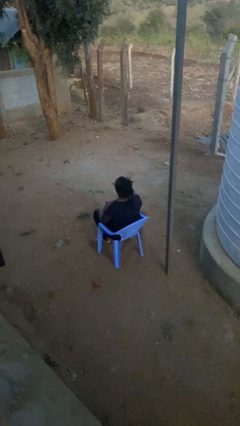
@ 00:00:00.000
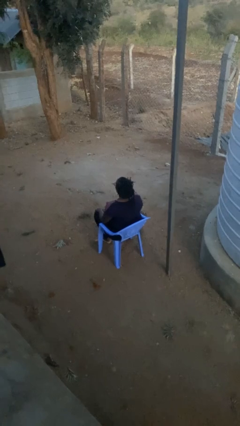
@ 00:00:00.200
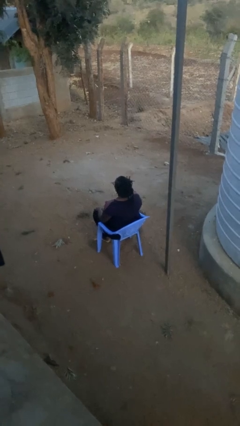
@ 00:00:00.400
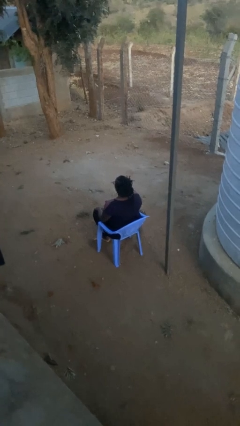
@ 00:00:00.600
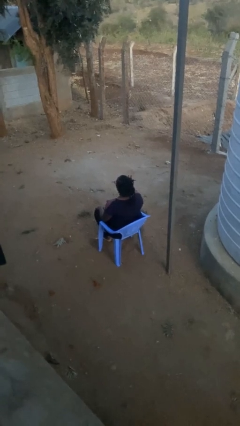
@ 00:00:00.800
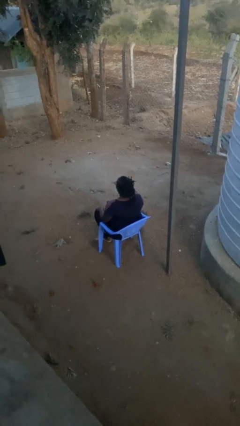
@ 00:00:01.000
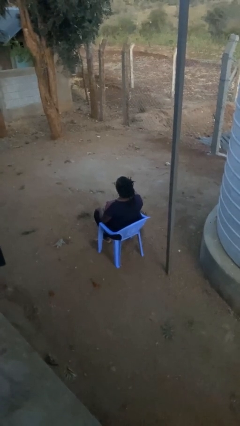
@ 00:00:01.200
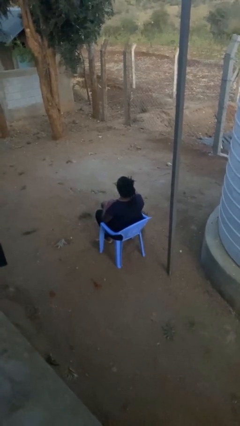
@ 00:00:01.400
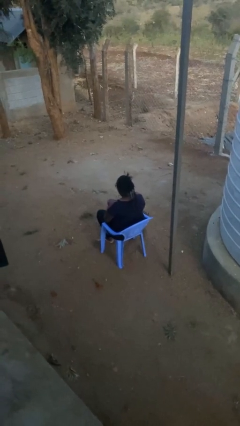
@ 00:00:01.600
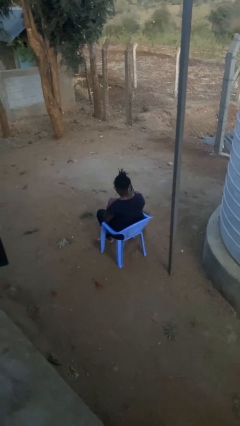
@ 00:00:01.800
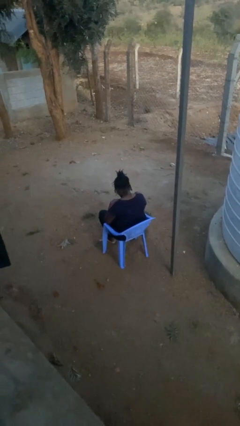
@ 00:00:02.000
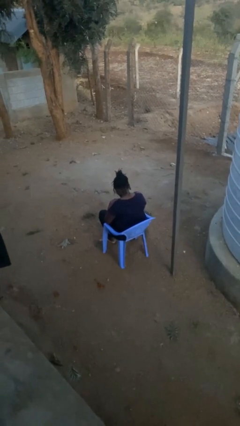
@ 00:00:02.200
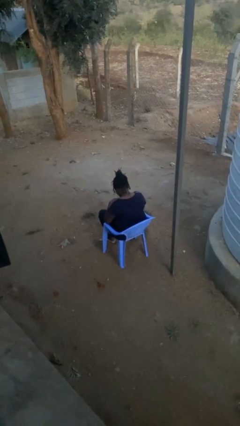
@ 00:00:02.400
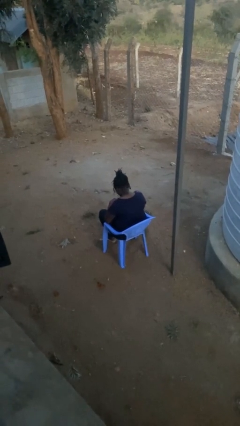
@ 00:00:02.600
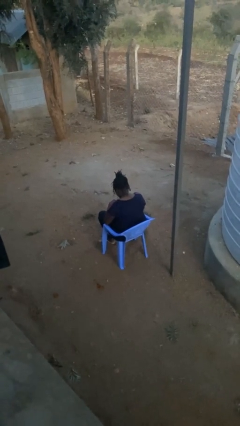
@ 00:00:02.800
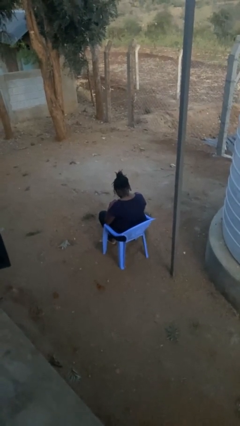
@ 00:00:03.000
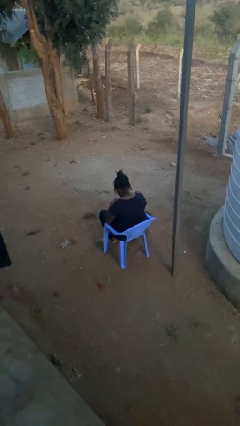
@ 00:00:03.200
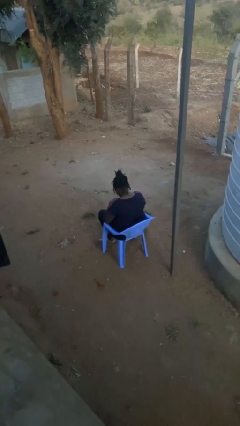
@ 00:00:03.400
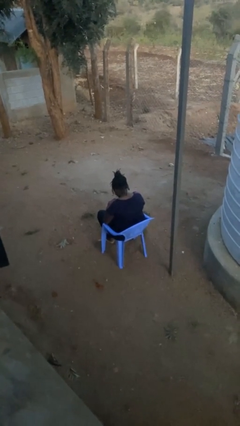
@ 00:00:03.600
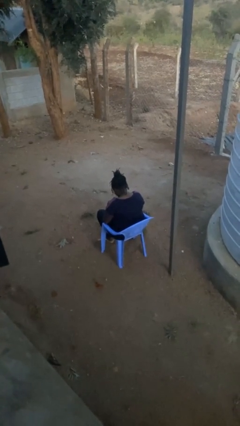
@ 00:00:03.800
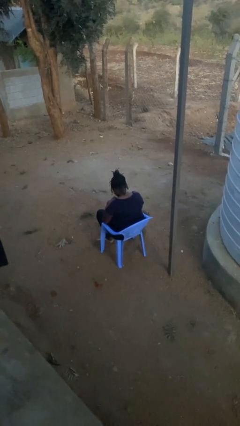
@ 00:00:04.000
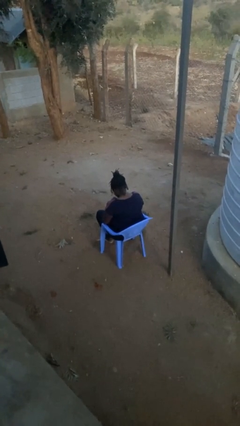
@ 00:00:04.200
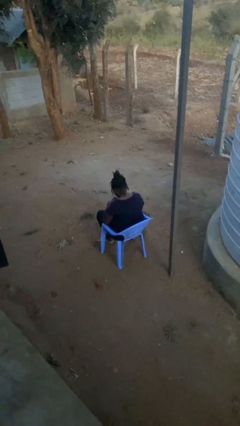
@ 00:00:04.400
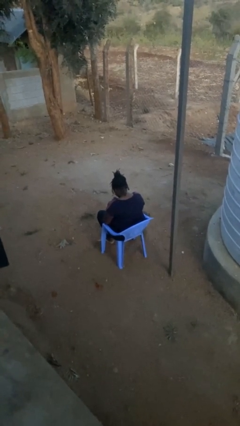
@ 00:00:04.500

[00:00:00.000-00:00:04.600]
person prays

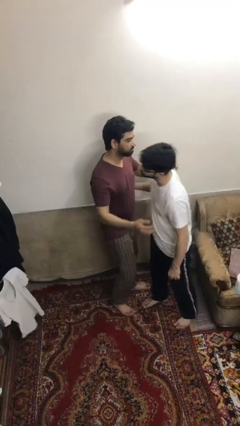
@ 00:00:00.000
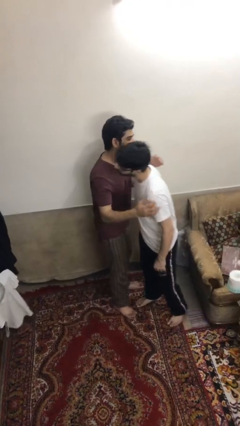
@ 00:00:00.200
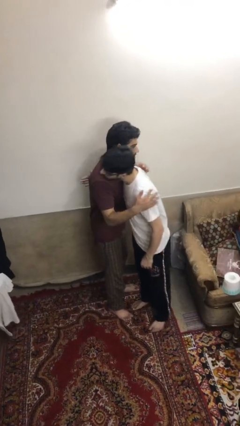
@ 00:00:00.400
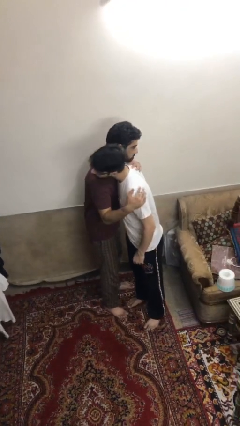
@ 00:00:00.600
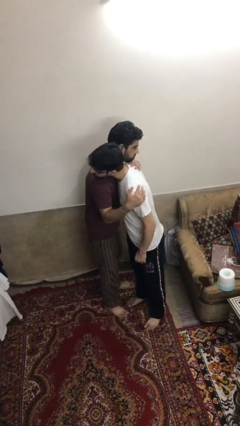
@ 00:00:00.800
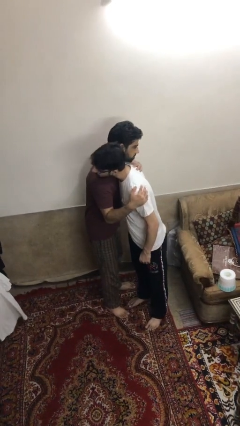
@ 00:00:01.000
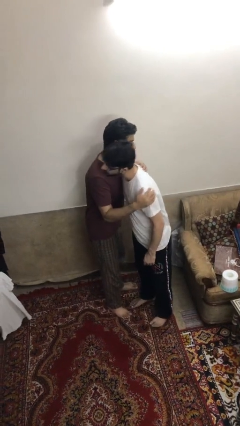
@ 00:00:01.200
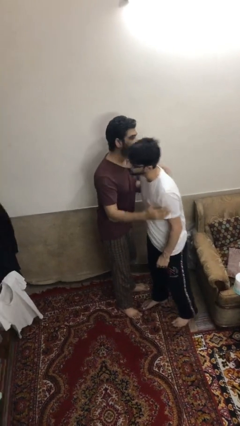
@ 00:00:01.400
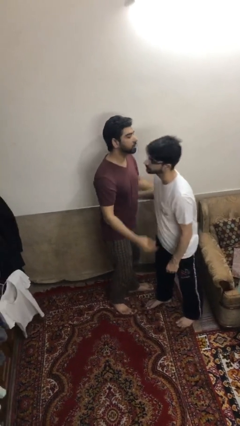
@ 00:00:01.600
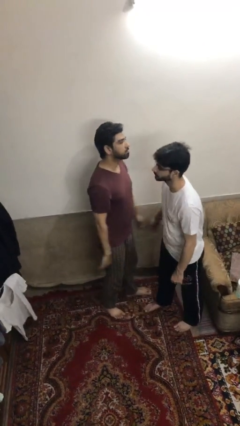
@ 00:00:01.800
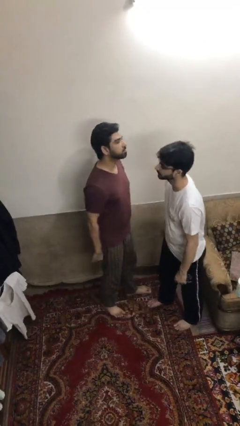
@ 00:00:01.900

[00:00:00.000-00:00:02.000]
person embraces person

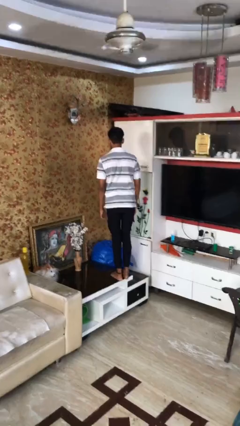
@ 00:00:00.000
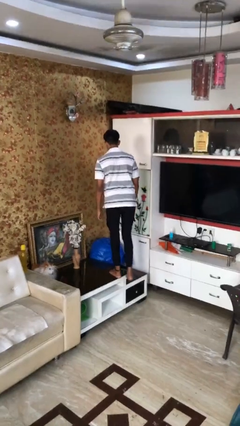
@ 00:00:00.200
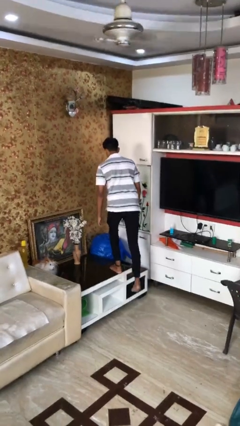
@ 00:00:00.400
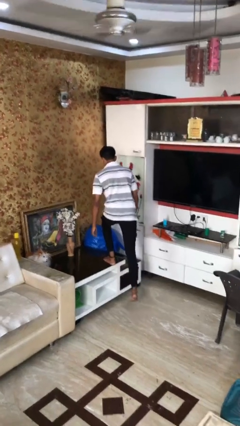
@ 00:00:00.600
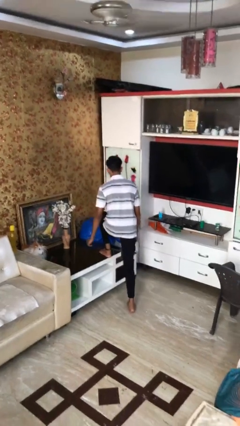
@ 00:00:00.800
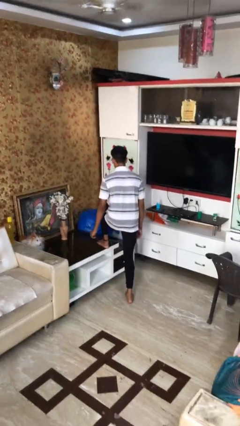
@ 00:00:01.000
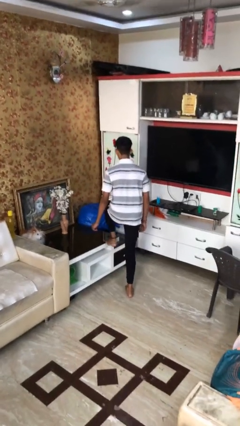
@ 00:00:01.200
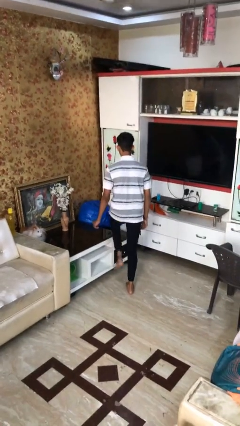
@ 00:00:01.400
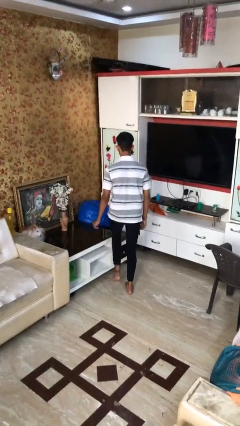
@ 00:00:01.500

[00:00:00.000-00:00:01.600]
person climbs off table

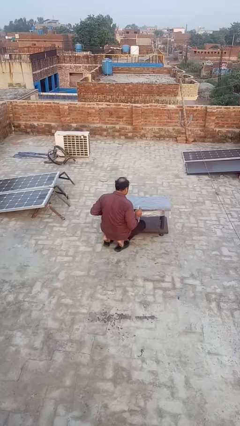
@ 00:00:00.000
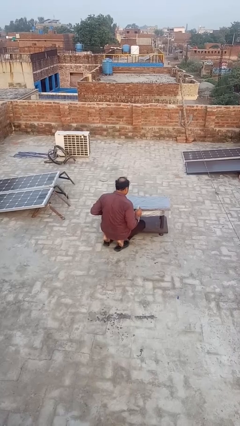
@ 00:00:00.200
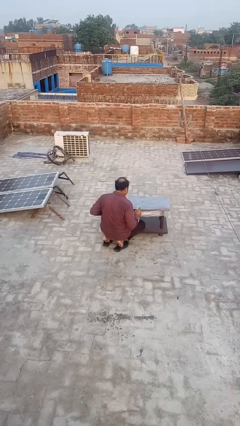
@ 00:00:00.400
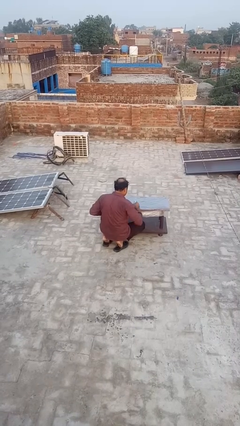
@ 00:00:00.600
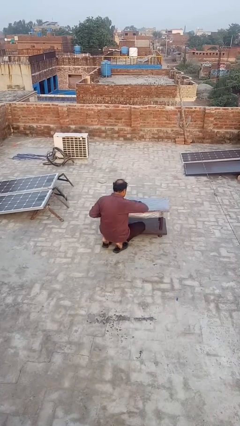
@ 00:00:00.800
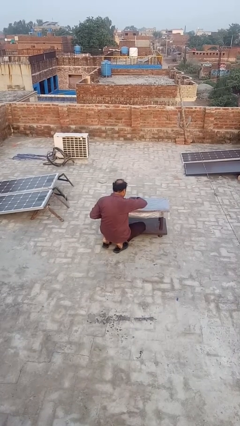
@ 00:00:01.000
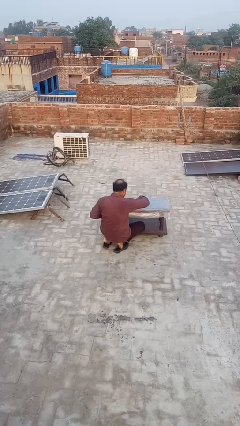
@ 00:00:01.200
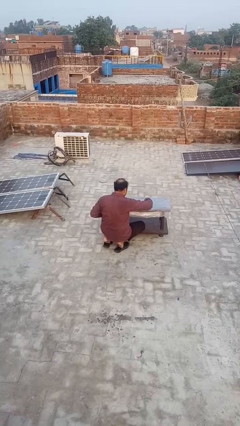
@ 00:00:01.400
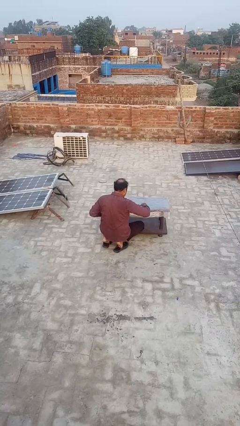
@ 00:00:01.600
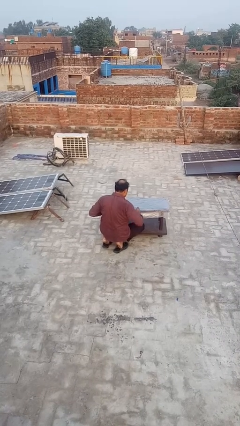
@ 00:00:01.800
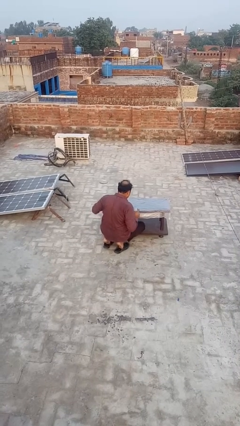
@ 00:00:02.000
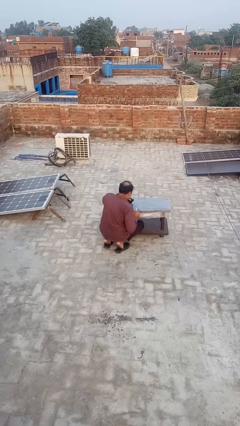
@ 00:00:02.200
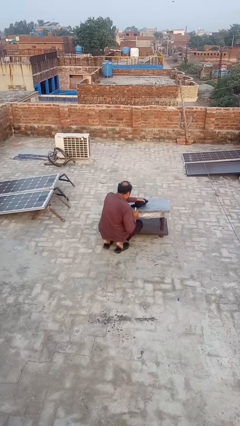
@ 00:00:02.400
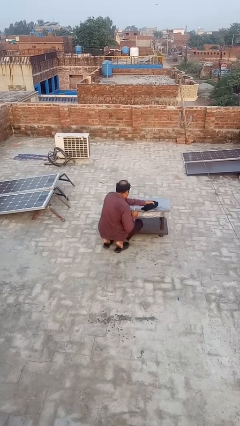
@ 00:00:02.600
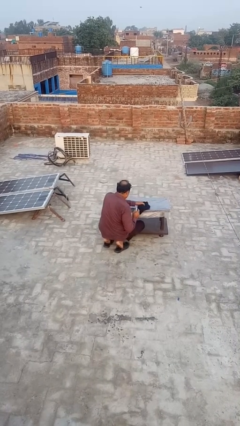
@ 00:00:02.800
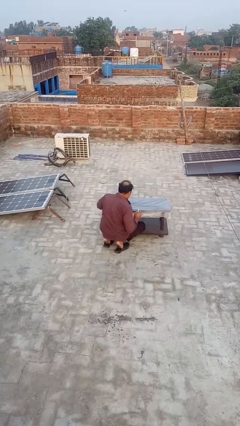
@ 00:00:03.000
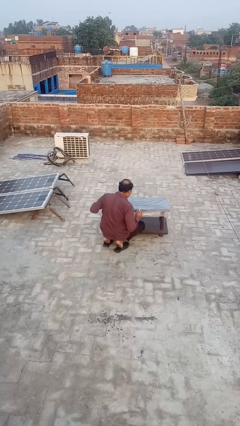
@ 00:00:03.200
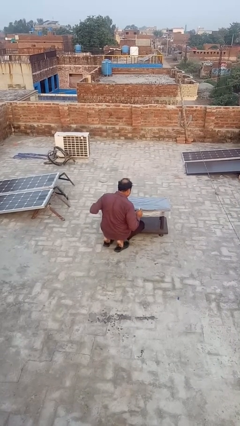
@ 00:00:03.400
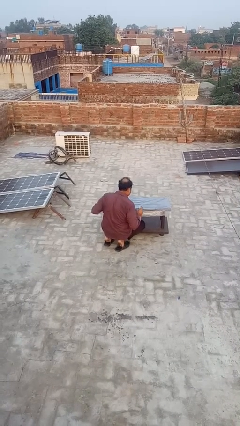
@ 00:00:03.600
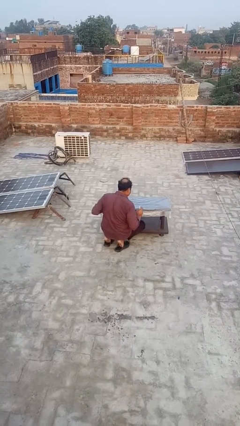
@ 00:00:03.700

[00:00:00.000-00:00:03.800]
person sprays from bottle

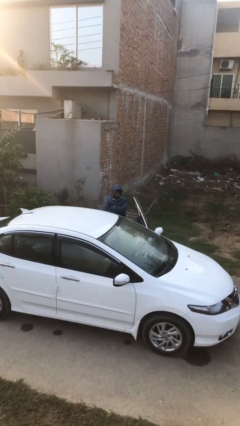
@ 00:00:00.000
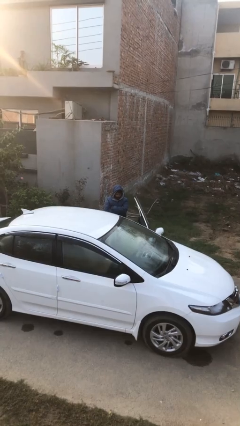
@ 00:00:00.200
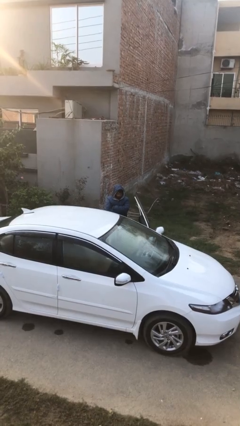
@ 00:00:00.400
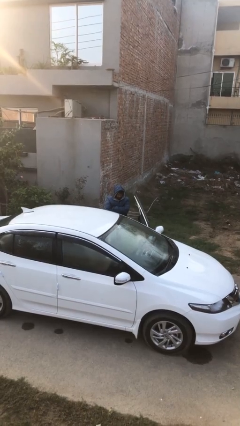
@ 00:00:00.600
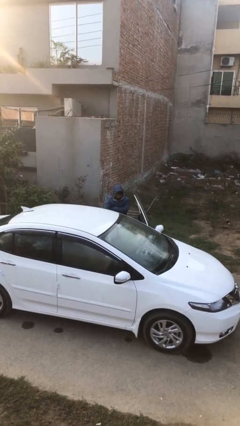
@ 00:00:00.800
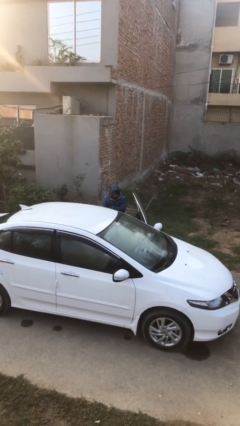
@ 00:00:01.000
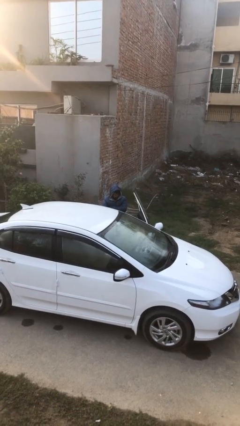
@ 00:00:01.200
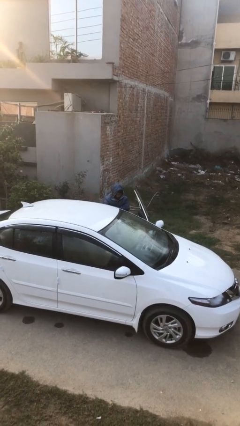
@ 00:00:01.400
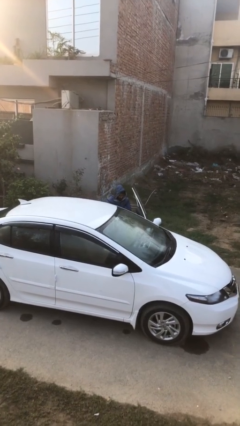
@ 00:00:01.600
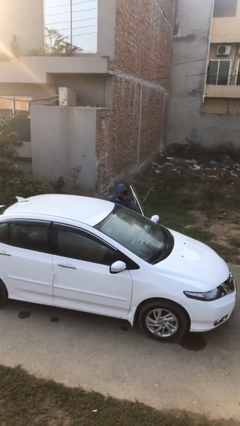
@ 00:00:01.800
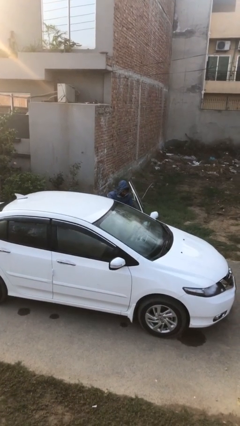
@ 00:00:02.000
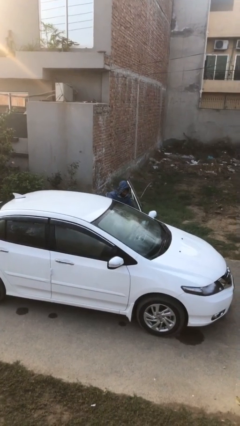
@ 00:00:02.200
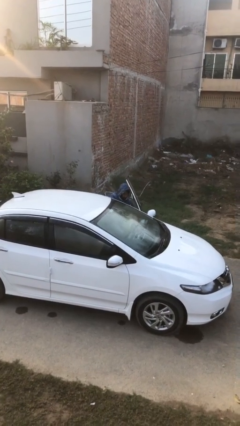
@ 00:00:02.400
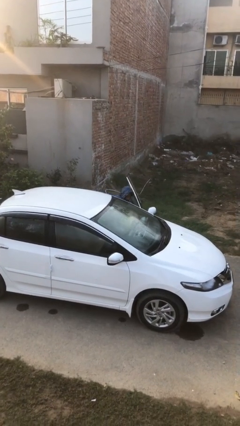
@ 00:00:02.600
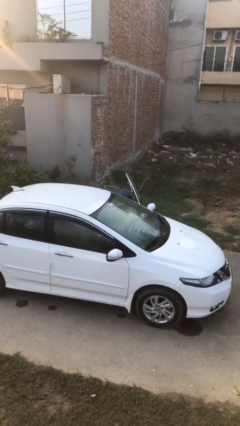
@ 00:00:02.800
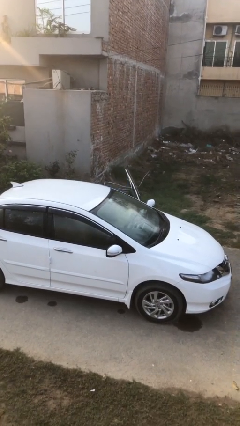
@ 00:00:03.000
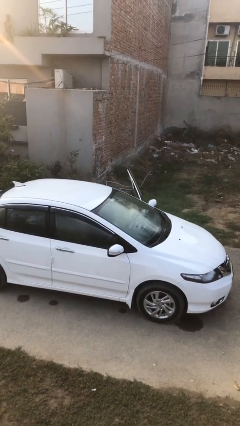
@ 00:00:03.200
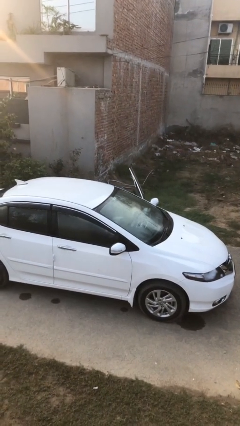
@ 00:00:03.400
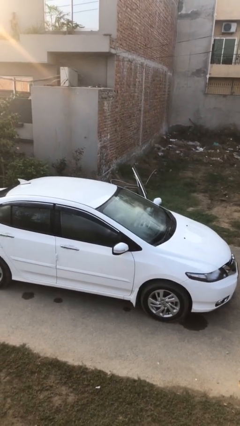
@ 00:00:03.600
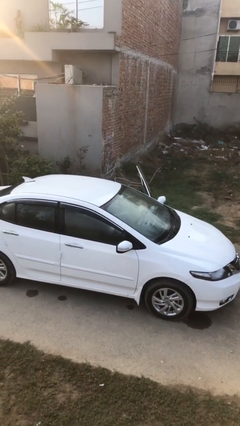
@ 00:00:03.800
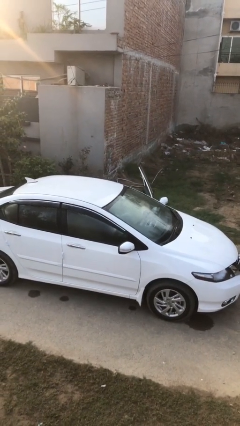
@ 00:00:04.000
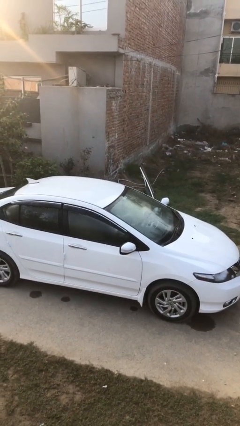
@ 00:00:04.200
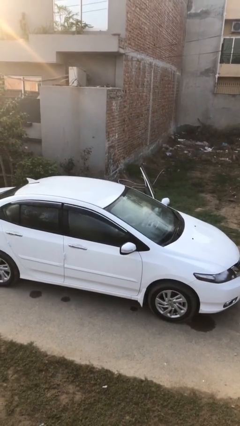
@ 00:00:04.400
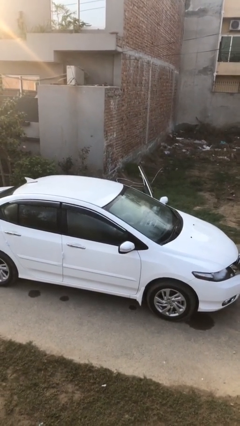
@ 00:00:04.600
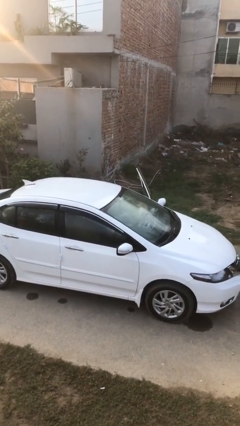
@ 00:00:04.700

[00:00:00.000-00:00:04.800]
person enters car

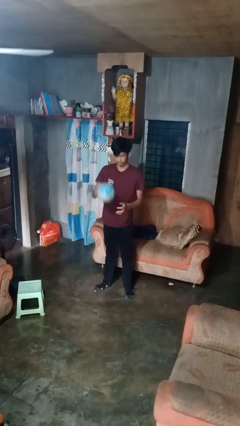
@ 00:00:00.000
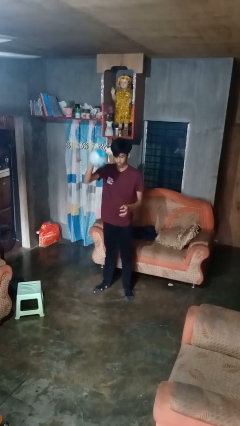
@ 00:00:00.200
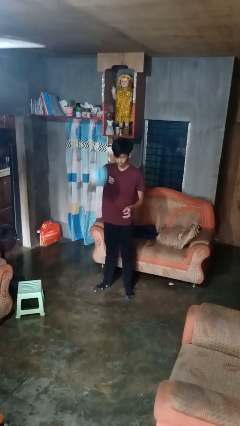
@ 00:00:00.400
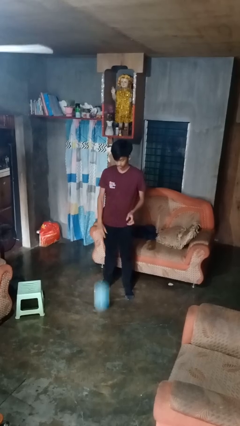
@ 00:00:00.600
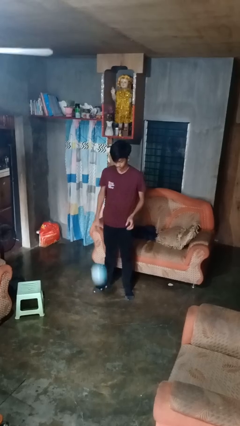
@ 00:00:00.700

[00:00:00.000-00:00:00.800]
person bounces ball on floor
